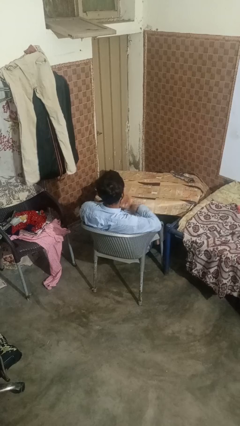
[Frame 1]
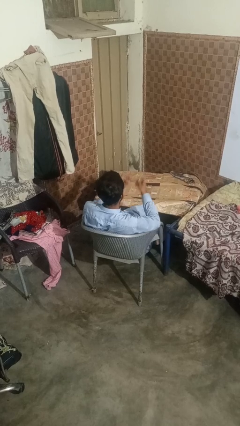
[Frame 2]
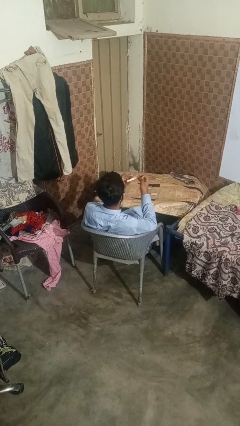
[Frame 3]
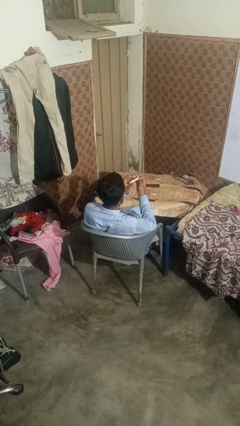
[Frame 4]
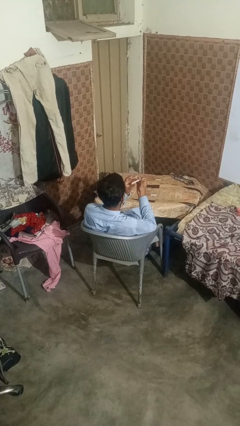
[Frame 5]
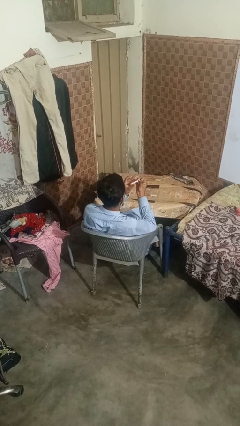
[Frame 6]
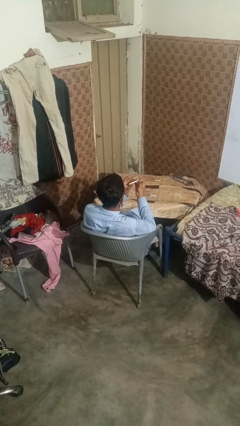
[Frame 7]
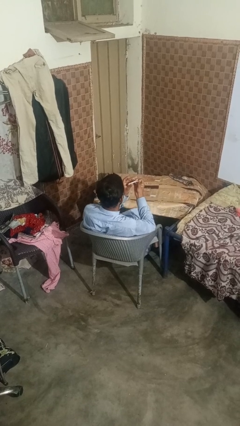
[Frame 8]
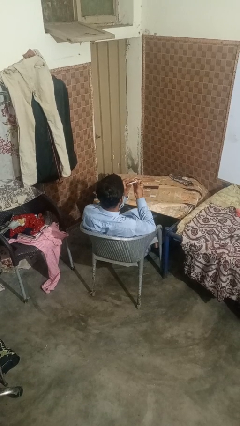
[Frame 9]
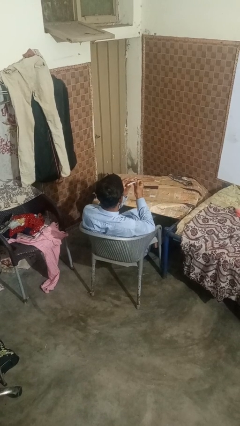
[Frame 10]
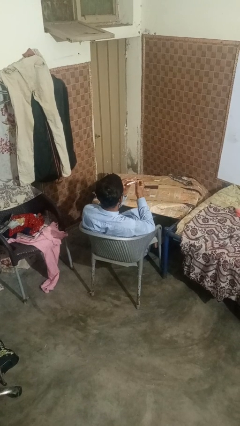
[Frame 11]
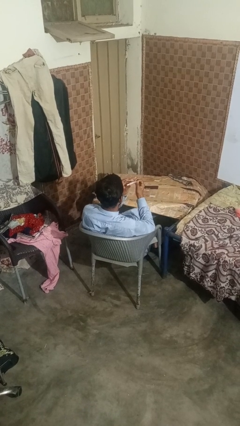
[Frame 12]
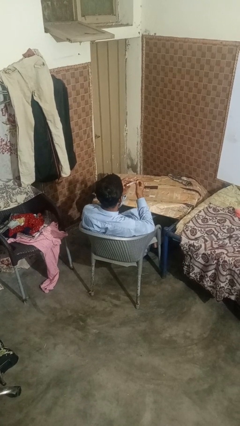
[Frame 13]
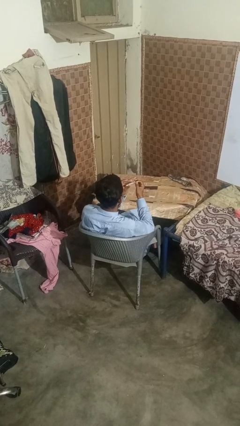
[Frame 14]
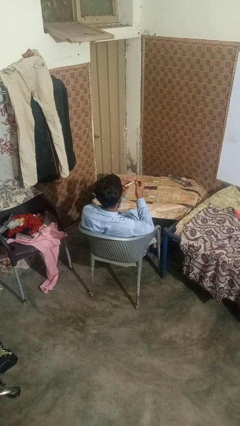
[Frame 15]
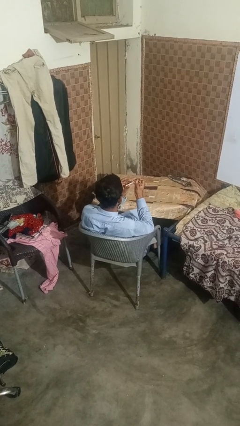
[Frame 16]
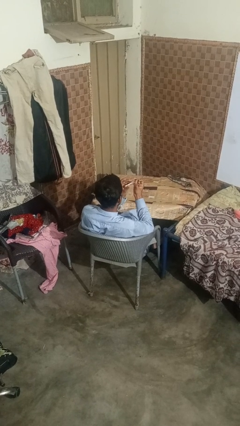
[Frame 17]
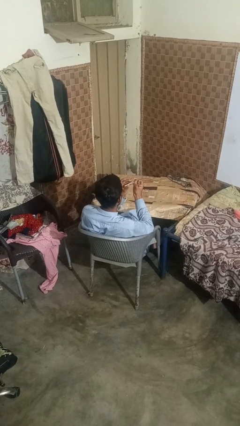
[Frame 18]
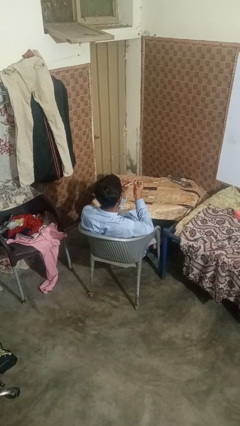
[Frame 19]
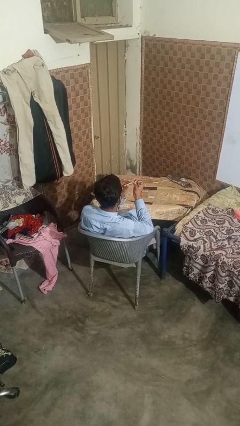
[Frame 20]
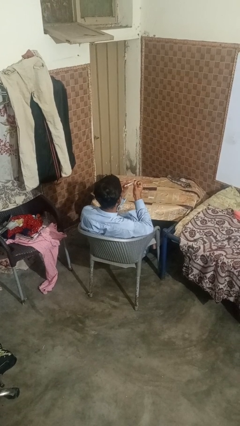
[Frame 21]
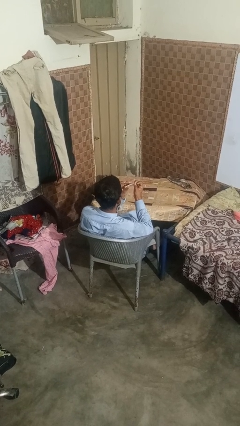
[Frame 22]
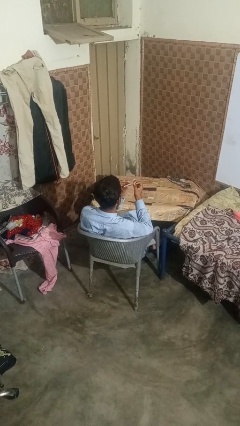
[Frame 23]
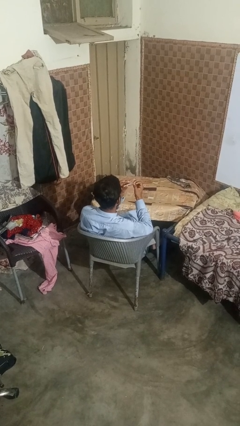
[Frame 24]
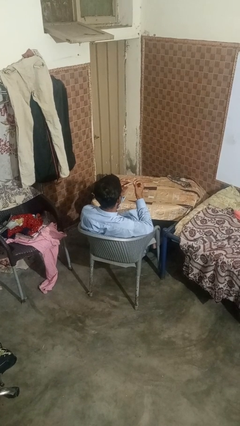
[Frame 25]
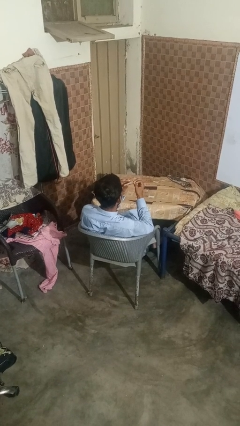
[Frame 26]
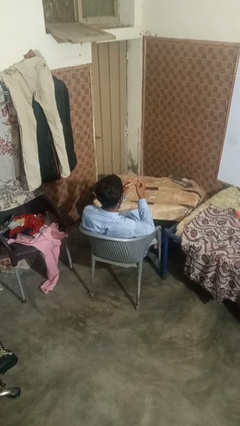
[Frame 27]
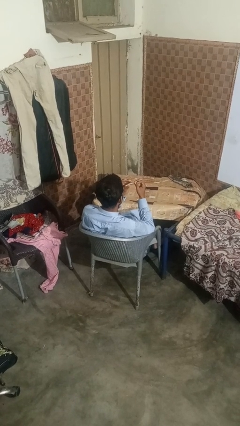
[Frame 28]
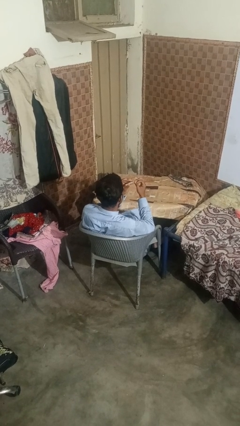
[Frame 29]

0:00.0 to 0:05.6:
person clips fingernails

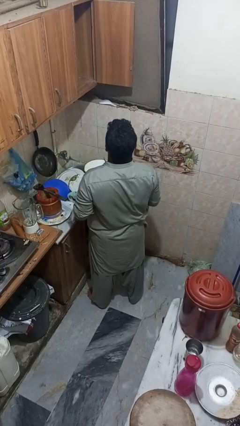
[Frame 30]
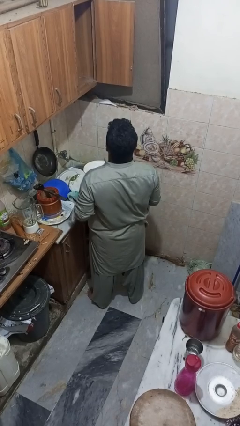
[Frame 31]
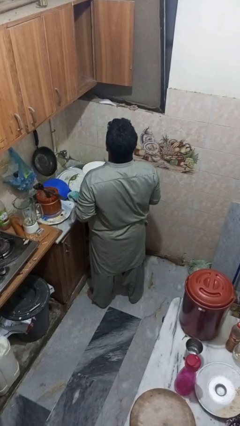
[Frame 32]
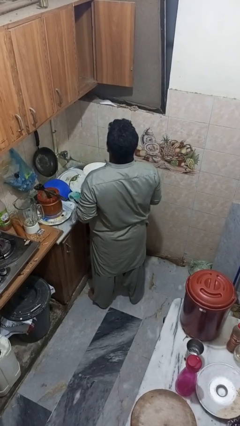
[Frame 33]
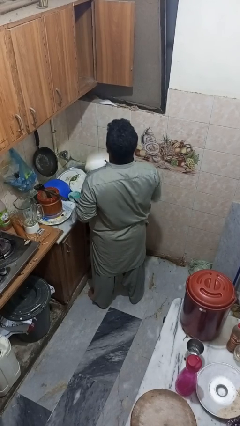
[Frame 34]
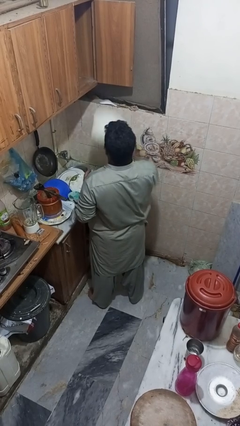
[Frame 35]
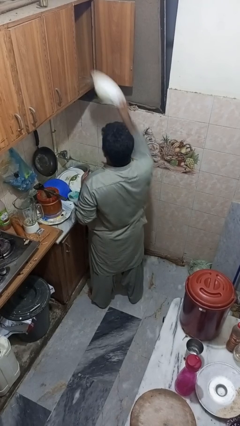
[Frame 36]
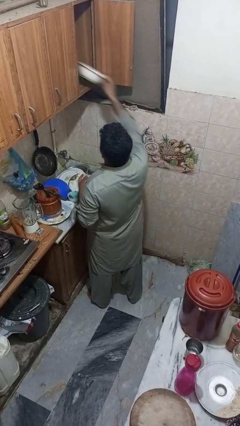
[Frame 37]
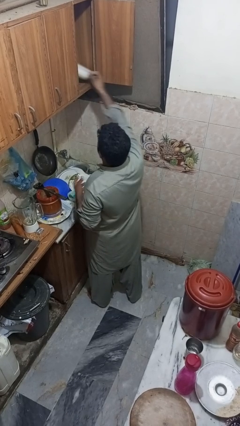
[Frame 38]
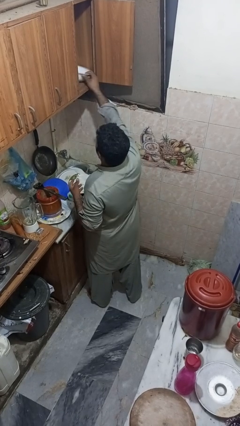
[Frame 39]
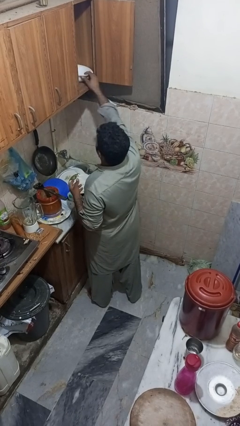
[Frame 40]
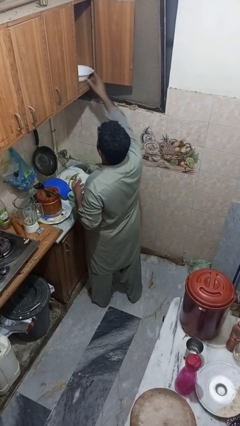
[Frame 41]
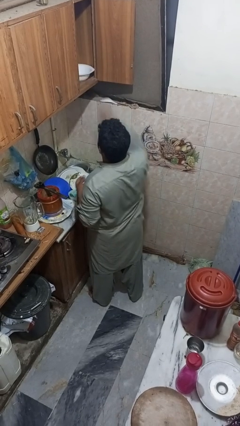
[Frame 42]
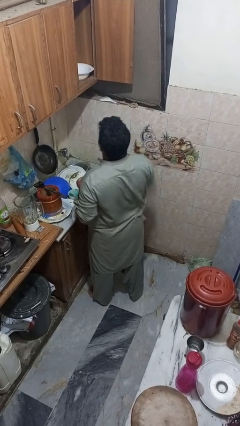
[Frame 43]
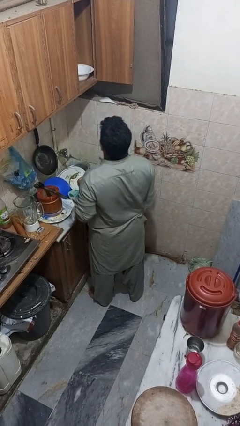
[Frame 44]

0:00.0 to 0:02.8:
person puts object in cabinet

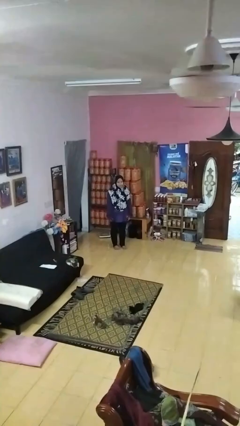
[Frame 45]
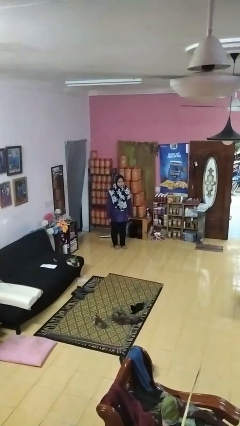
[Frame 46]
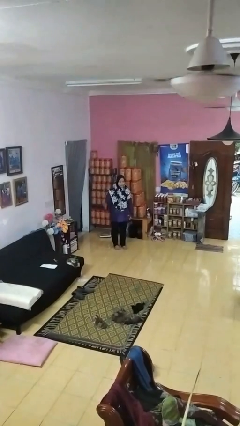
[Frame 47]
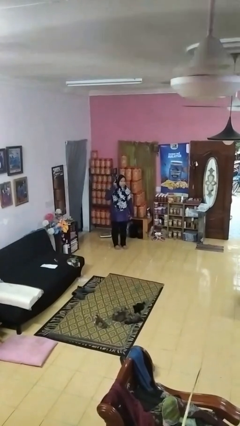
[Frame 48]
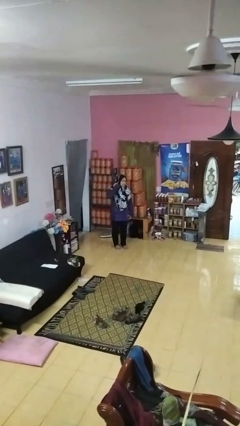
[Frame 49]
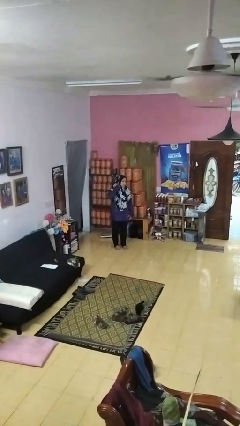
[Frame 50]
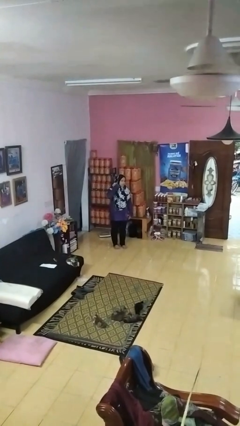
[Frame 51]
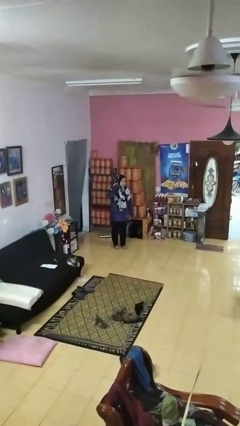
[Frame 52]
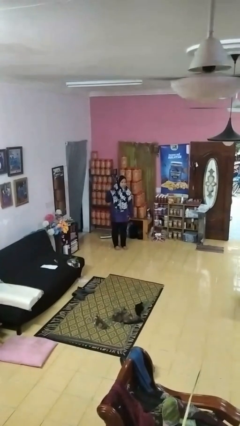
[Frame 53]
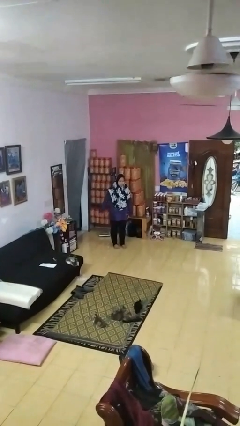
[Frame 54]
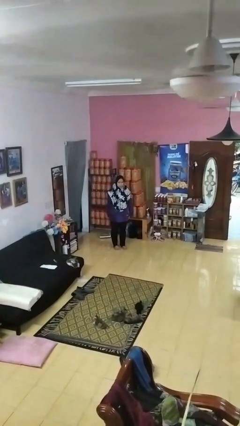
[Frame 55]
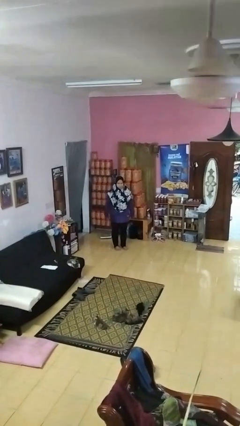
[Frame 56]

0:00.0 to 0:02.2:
person gestures listen closely

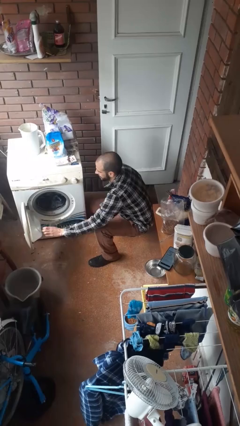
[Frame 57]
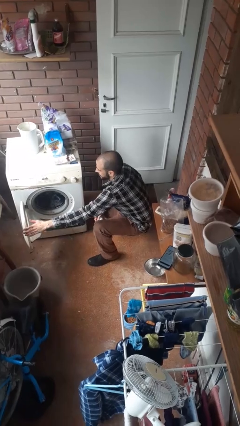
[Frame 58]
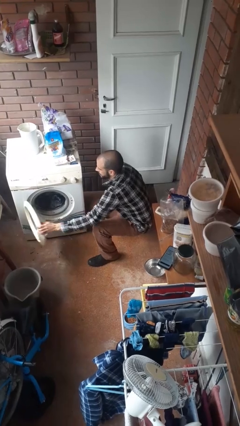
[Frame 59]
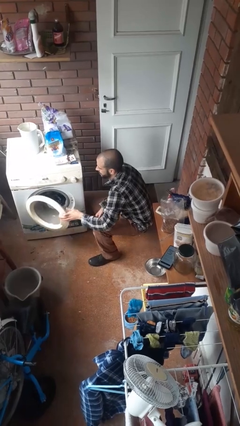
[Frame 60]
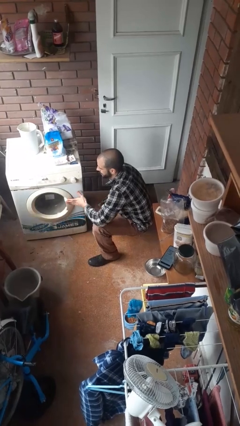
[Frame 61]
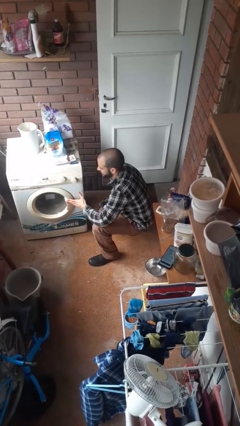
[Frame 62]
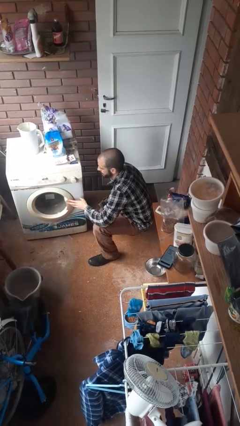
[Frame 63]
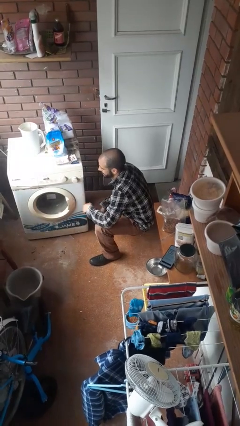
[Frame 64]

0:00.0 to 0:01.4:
person closes clothes washer

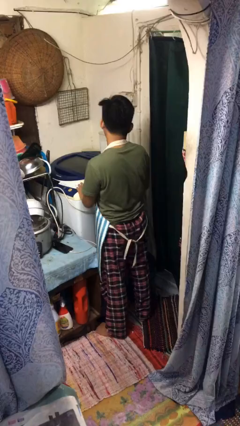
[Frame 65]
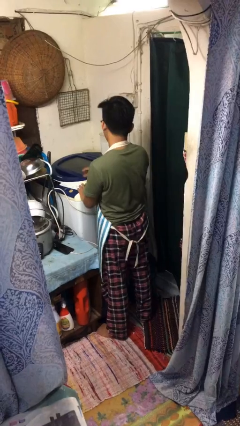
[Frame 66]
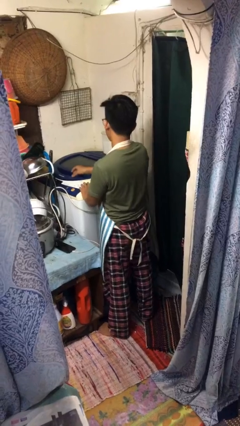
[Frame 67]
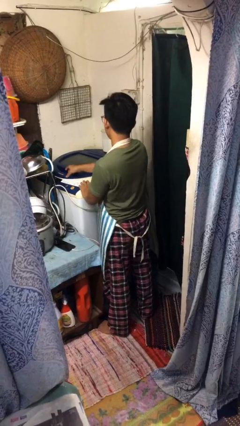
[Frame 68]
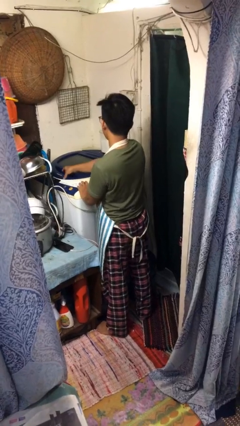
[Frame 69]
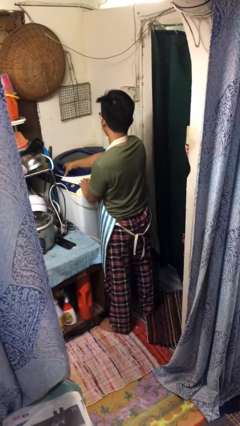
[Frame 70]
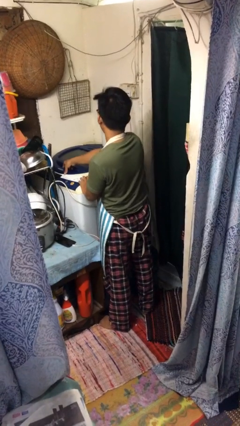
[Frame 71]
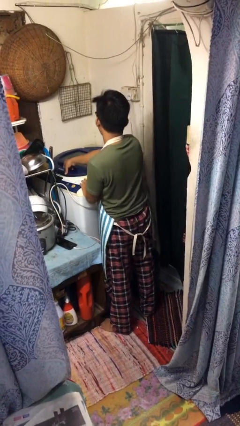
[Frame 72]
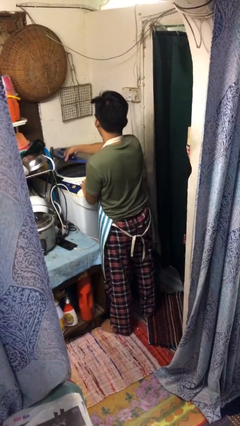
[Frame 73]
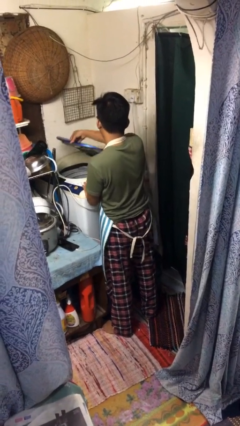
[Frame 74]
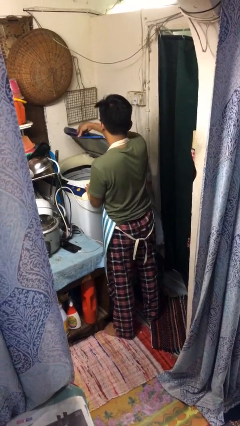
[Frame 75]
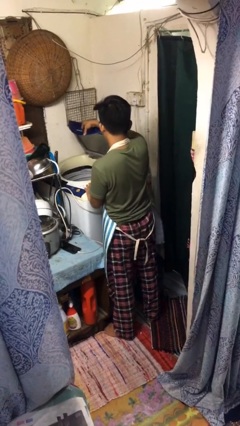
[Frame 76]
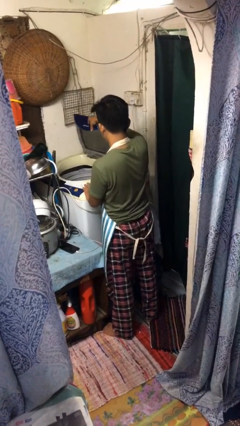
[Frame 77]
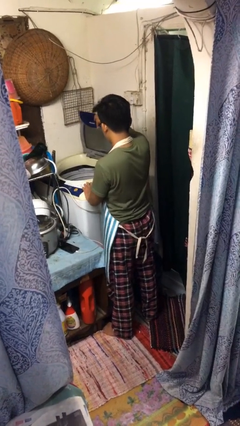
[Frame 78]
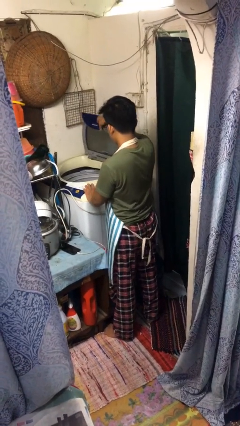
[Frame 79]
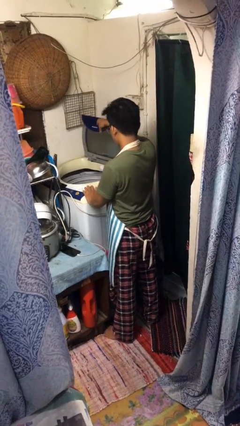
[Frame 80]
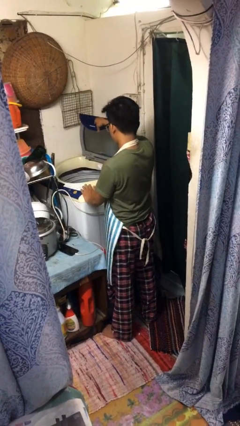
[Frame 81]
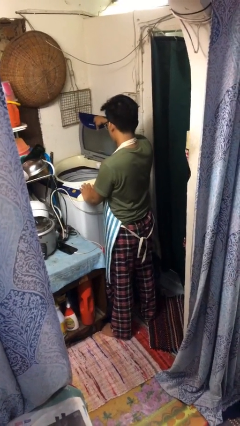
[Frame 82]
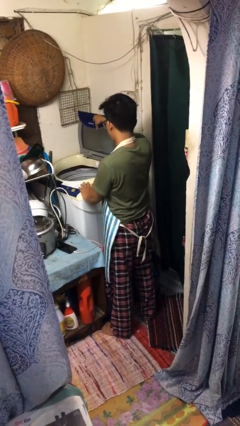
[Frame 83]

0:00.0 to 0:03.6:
person opens clothes washer

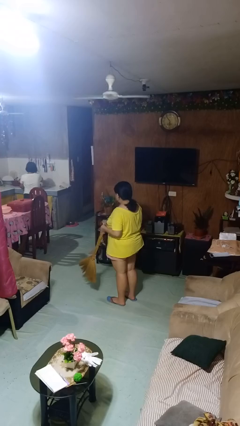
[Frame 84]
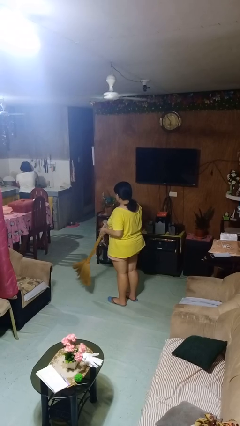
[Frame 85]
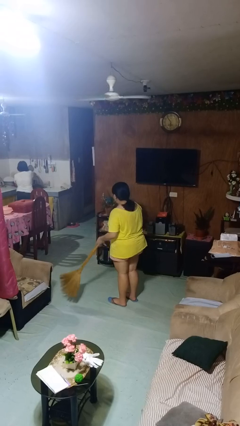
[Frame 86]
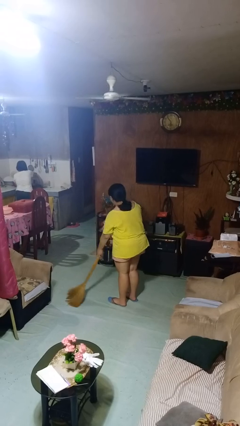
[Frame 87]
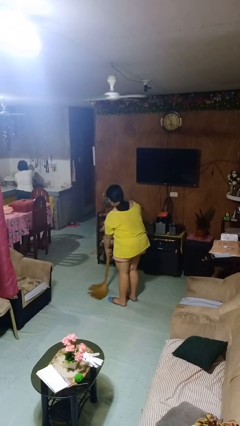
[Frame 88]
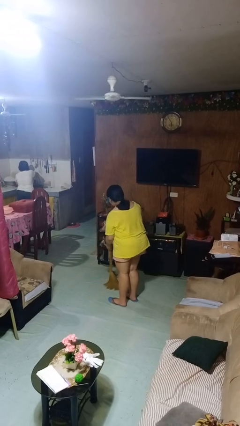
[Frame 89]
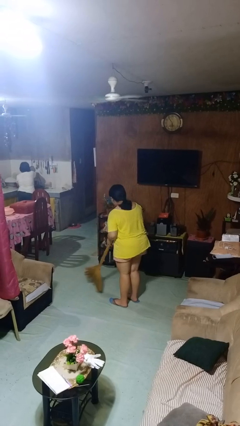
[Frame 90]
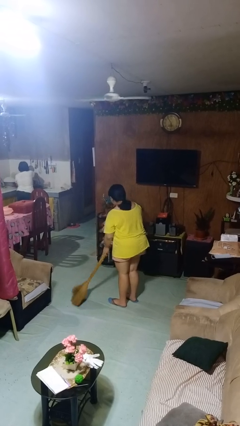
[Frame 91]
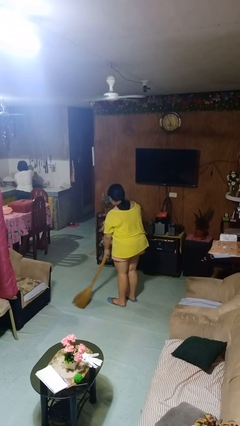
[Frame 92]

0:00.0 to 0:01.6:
person sweeps floor

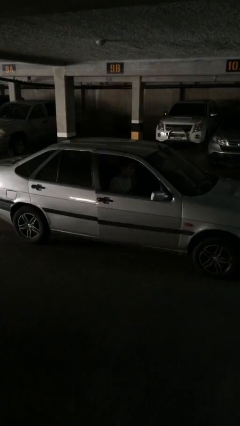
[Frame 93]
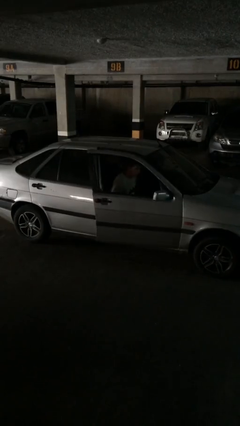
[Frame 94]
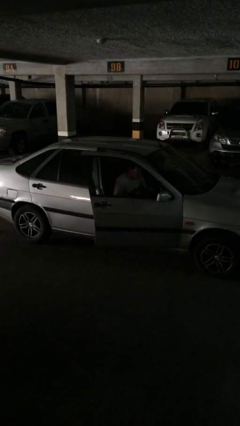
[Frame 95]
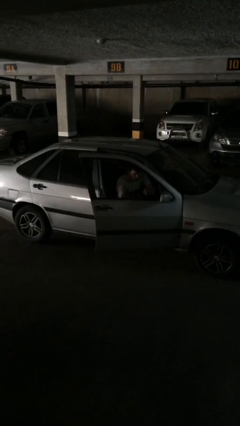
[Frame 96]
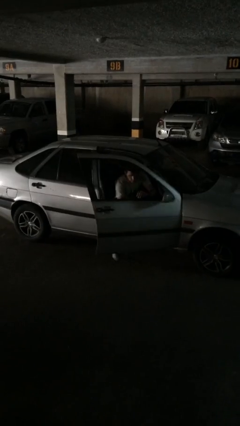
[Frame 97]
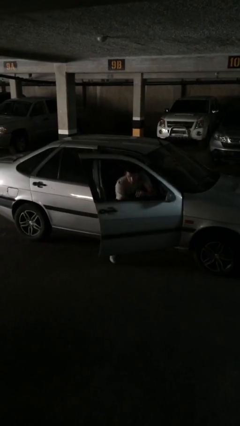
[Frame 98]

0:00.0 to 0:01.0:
person opens car door
